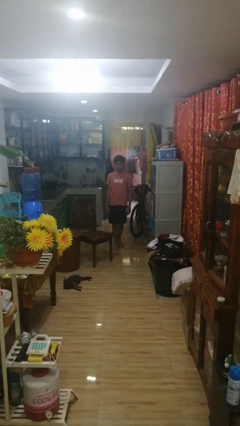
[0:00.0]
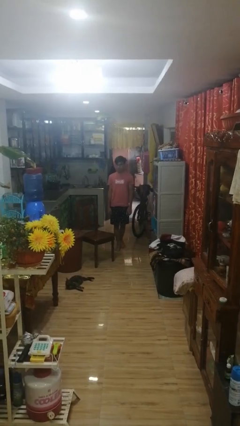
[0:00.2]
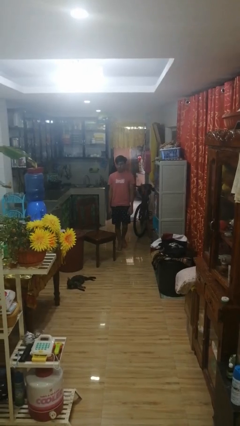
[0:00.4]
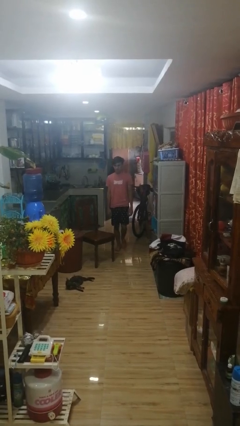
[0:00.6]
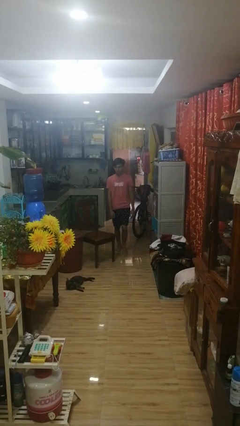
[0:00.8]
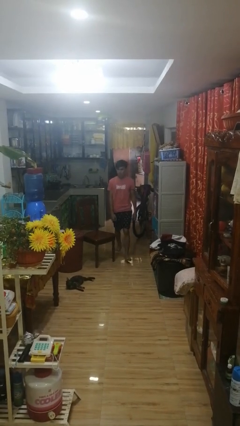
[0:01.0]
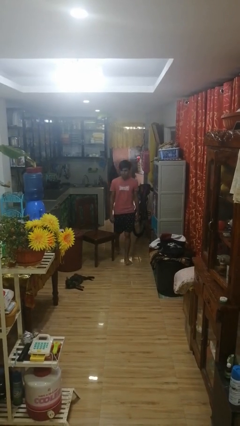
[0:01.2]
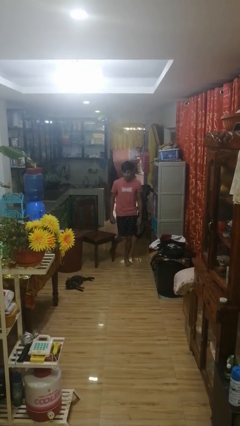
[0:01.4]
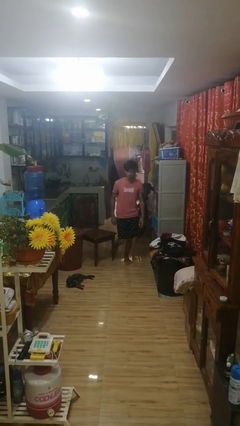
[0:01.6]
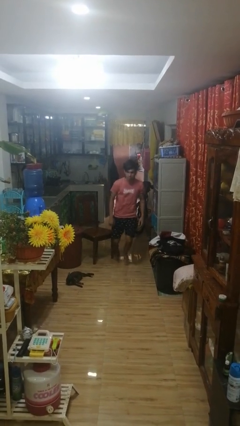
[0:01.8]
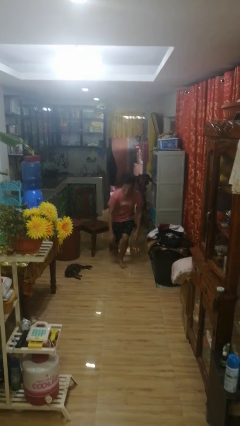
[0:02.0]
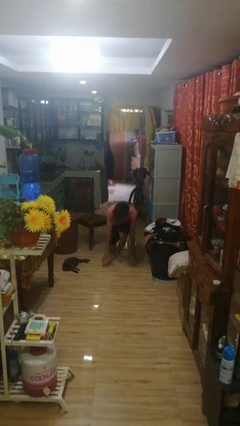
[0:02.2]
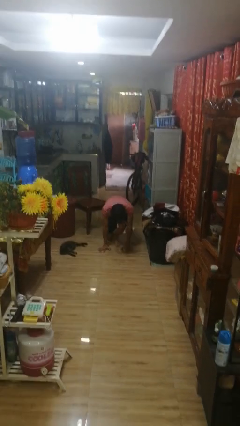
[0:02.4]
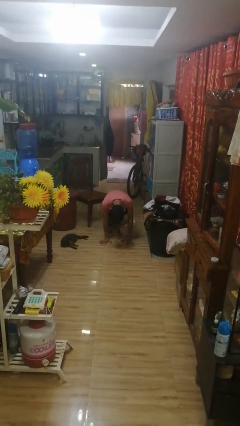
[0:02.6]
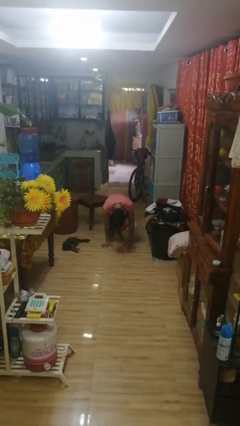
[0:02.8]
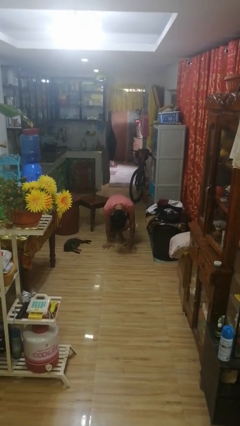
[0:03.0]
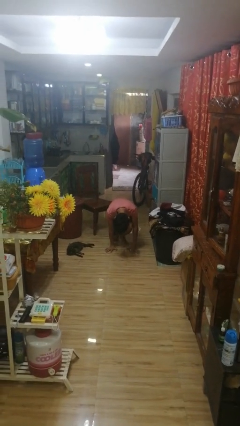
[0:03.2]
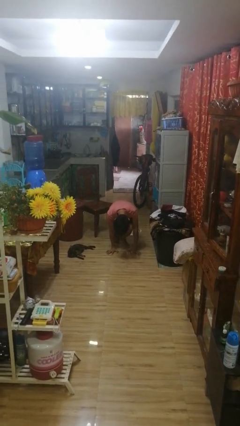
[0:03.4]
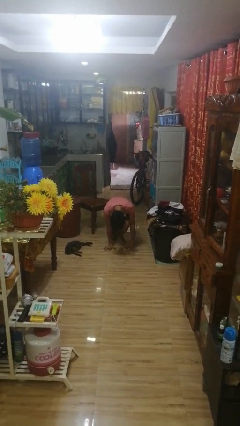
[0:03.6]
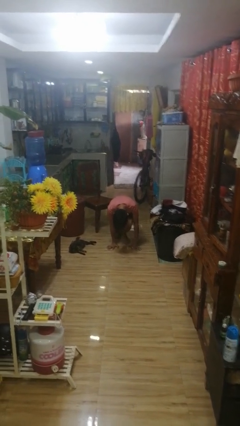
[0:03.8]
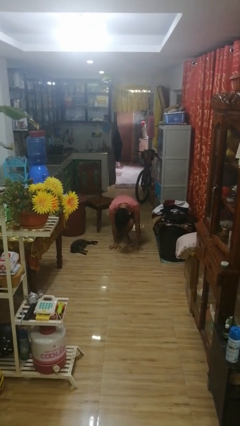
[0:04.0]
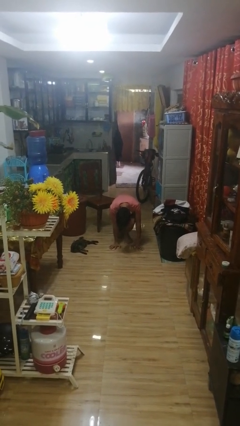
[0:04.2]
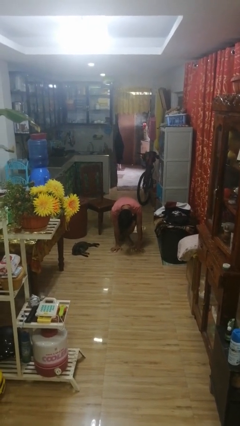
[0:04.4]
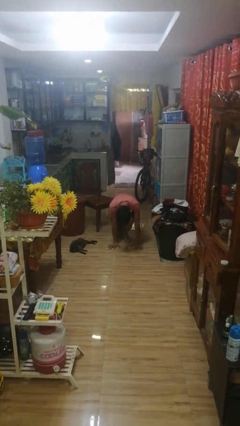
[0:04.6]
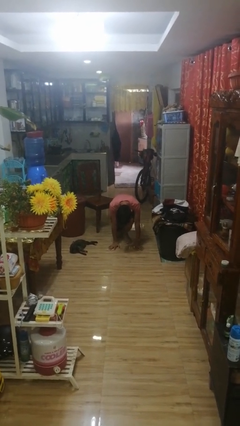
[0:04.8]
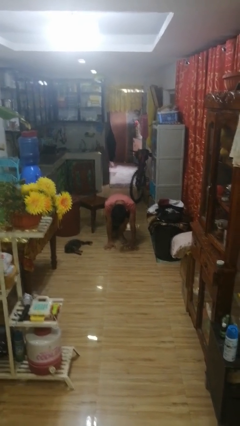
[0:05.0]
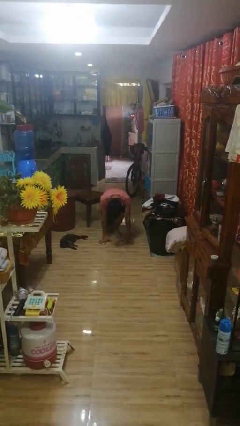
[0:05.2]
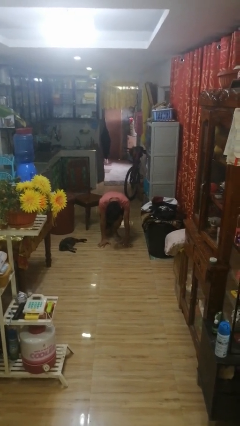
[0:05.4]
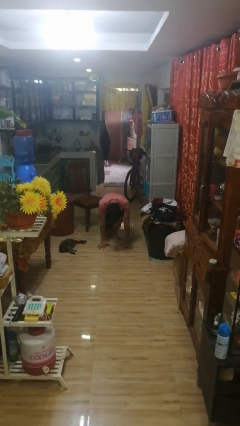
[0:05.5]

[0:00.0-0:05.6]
person trips on object on floor

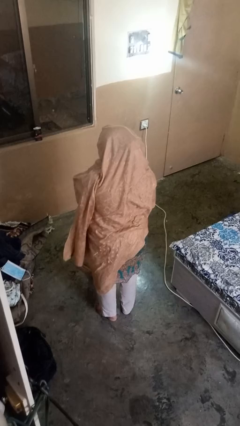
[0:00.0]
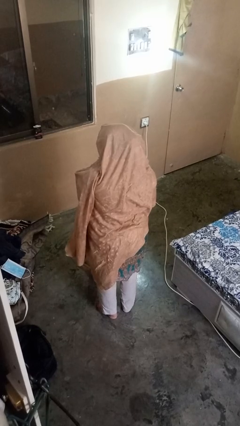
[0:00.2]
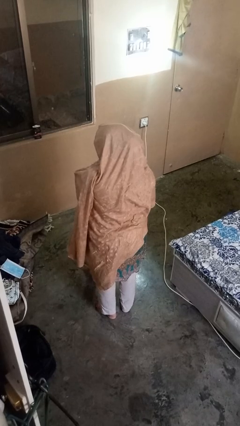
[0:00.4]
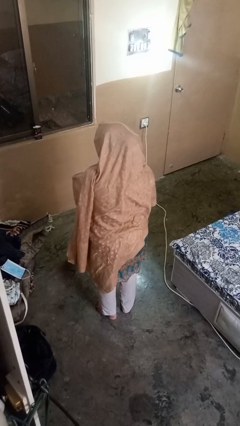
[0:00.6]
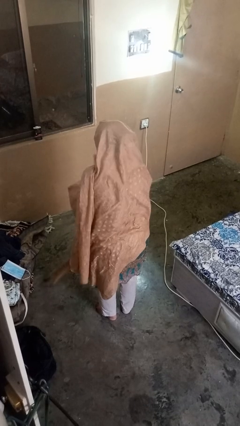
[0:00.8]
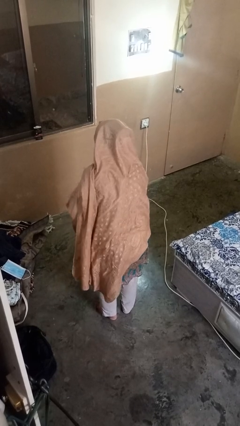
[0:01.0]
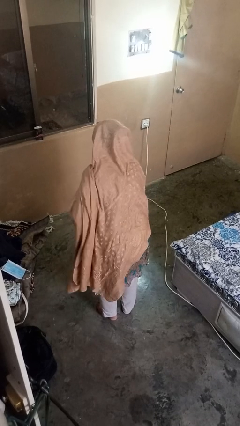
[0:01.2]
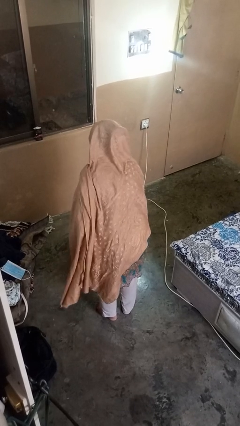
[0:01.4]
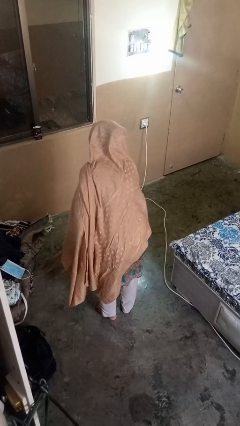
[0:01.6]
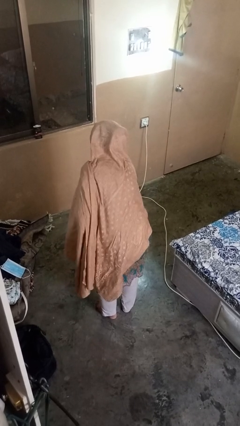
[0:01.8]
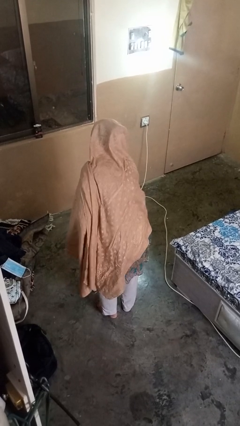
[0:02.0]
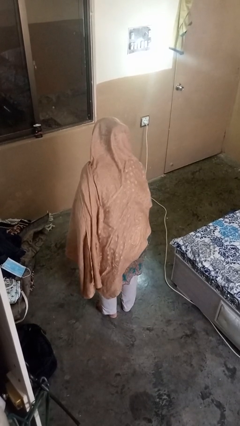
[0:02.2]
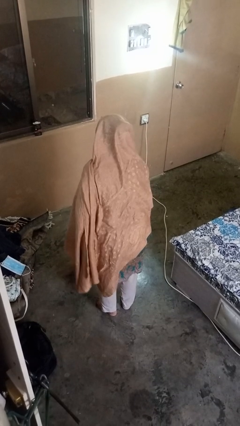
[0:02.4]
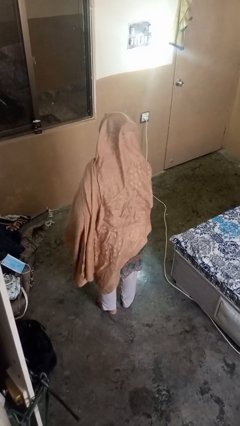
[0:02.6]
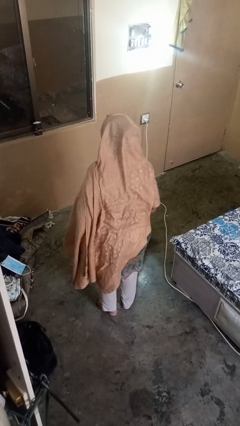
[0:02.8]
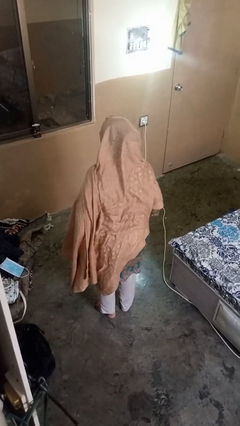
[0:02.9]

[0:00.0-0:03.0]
person sweeps floor

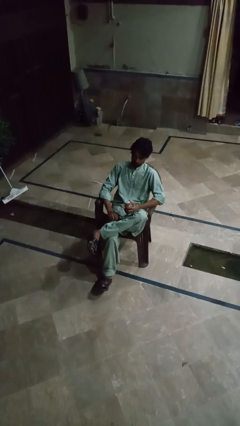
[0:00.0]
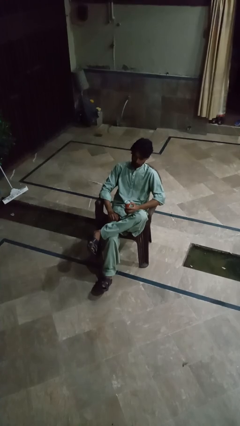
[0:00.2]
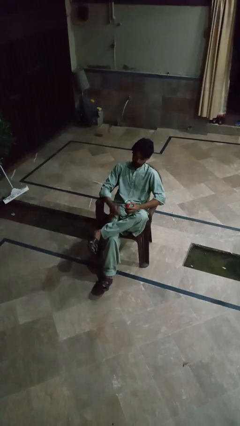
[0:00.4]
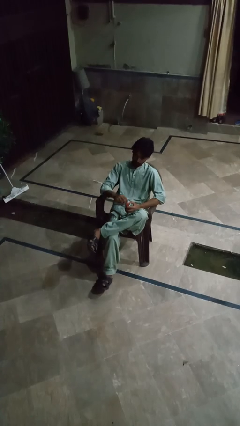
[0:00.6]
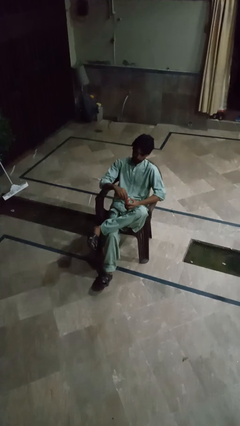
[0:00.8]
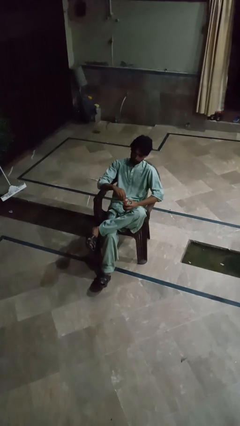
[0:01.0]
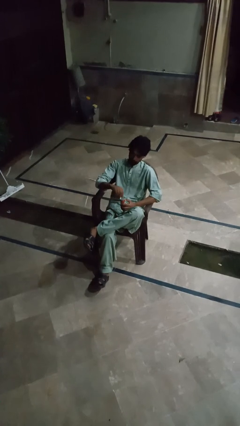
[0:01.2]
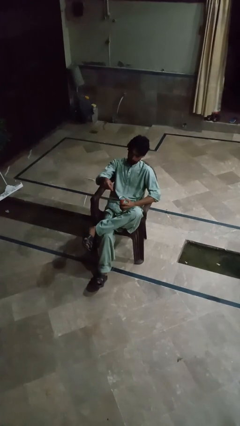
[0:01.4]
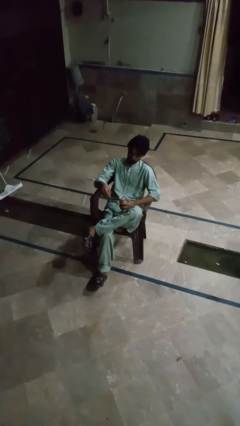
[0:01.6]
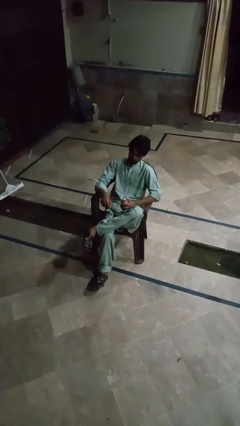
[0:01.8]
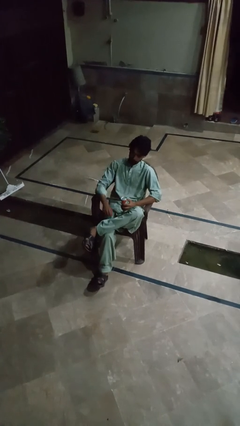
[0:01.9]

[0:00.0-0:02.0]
person opens can with can opener

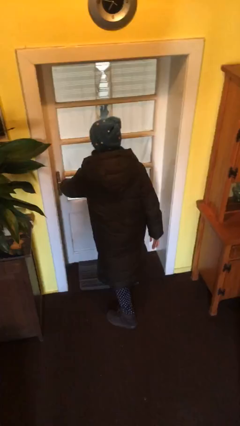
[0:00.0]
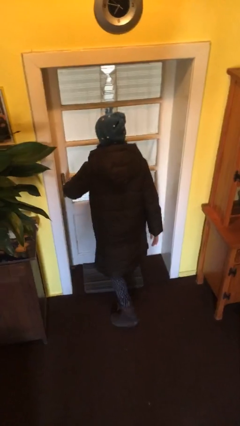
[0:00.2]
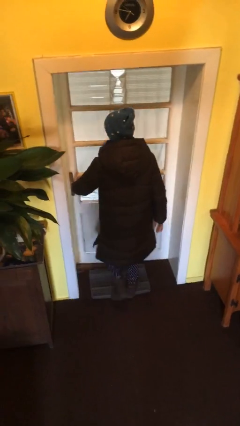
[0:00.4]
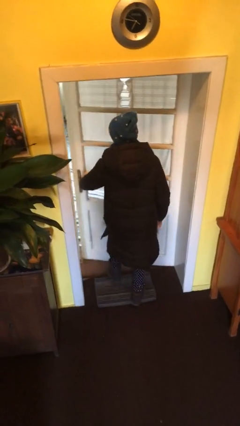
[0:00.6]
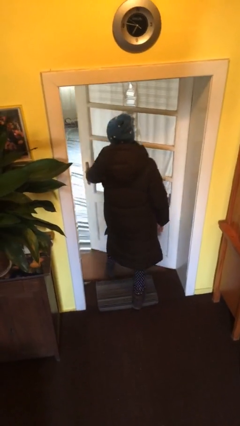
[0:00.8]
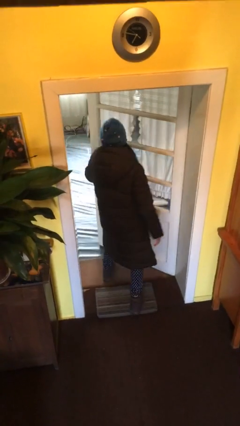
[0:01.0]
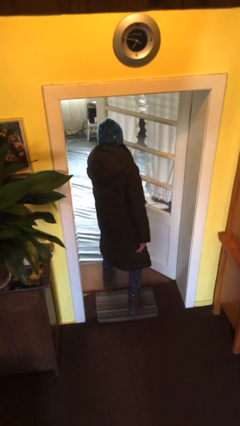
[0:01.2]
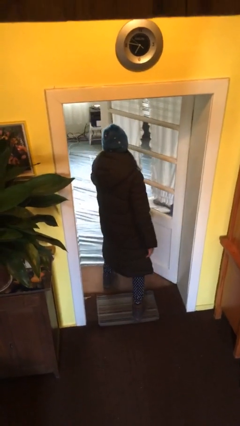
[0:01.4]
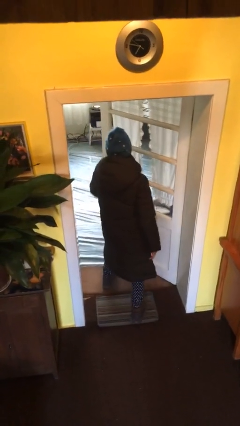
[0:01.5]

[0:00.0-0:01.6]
person opens facility door

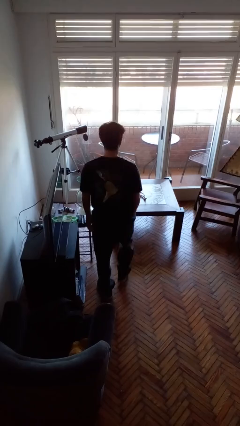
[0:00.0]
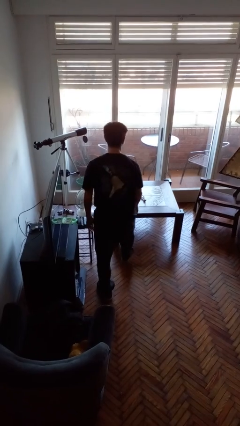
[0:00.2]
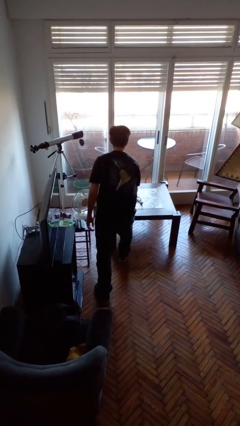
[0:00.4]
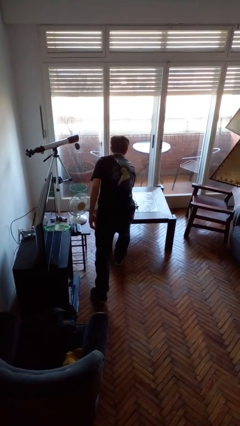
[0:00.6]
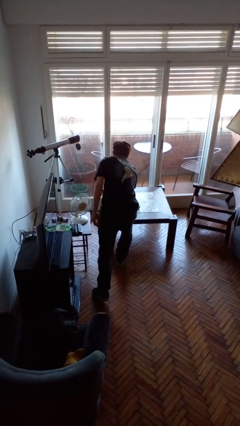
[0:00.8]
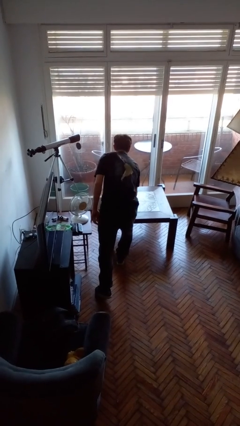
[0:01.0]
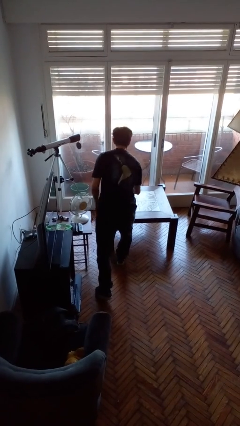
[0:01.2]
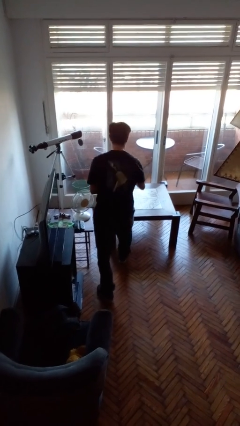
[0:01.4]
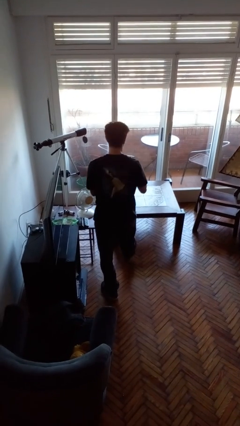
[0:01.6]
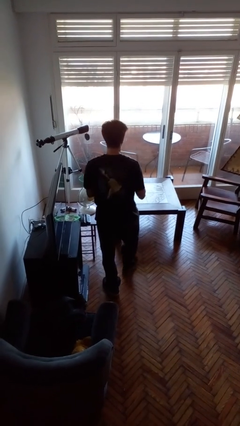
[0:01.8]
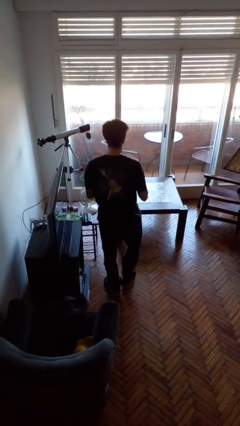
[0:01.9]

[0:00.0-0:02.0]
person picks up object from table

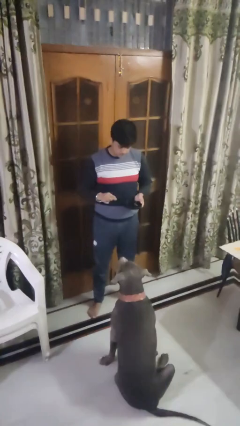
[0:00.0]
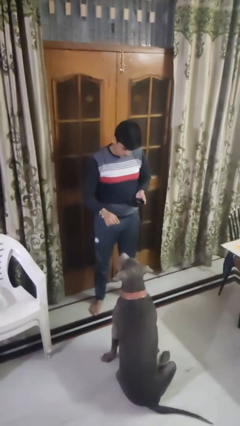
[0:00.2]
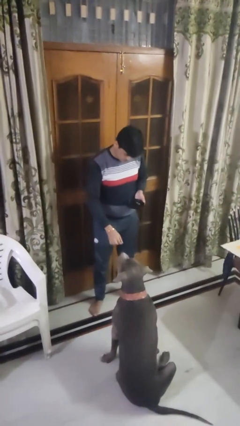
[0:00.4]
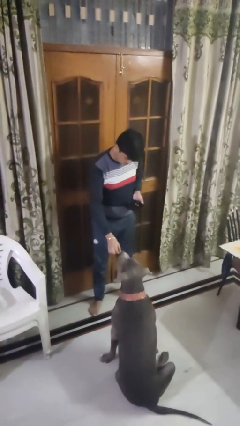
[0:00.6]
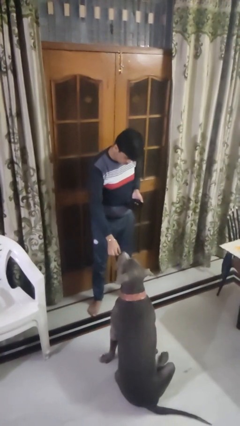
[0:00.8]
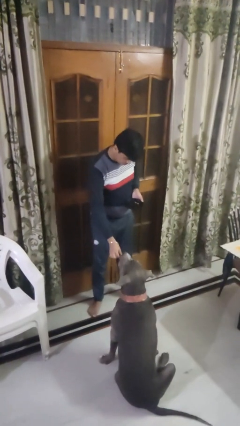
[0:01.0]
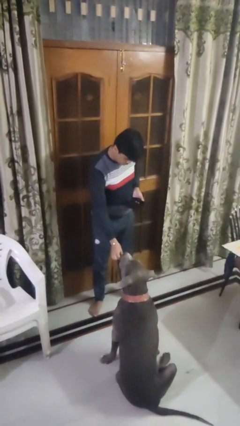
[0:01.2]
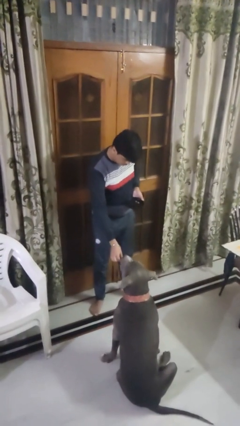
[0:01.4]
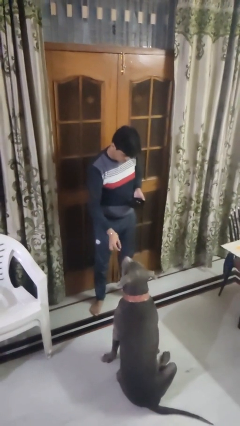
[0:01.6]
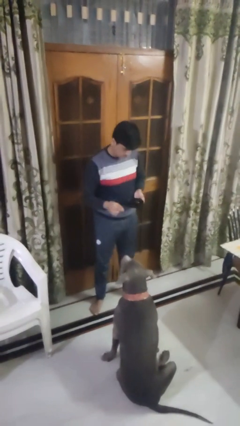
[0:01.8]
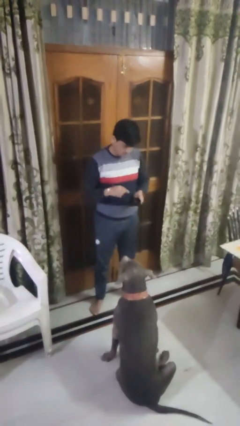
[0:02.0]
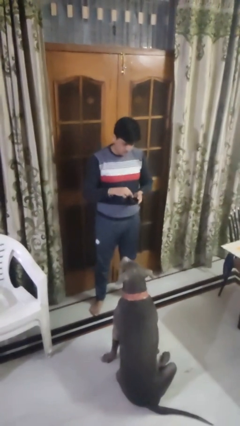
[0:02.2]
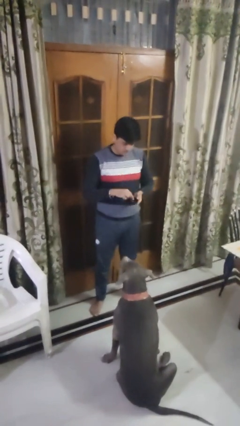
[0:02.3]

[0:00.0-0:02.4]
person feeds dog

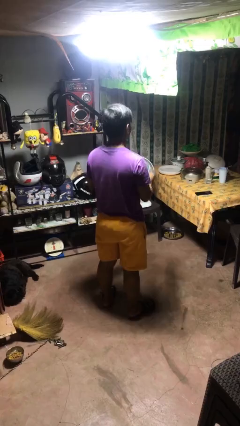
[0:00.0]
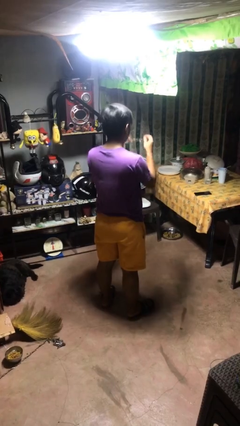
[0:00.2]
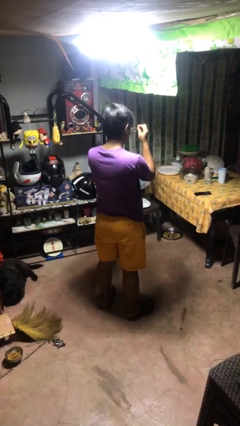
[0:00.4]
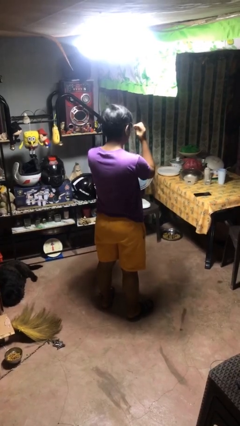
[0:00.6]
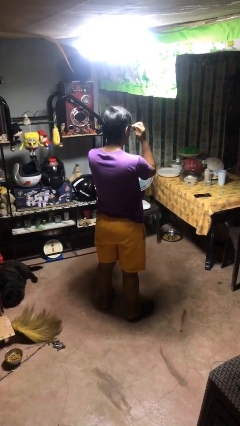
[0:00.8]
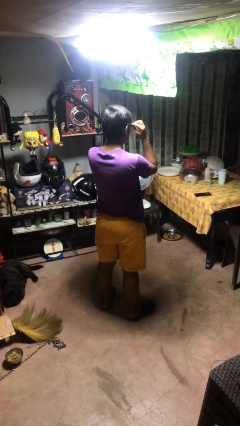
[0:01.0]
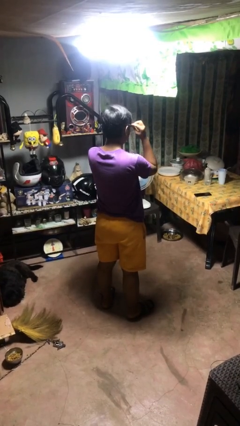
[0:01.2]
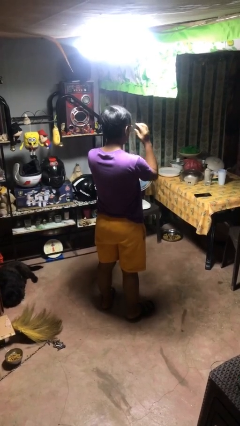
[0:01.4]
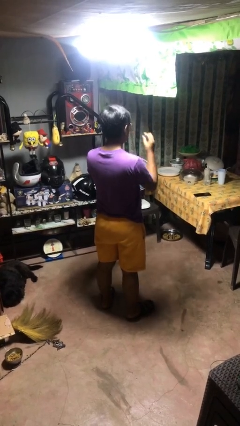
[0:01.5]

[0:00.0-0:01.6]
person puts on glasses
